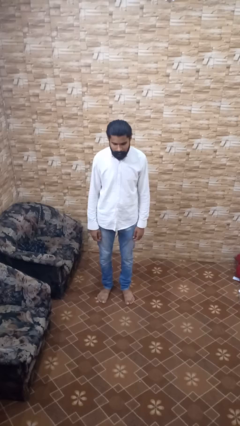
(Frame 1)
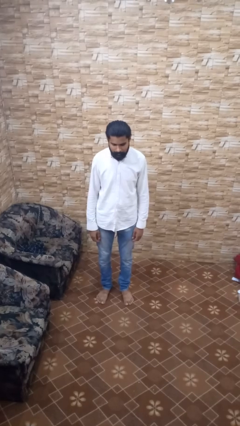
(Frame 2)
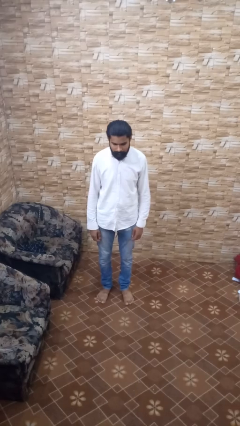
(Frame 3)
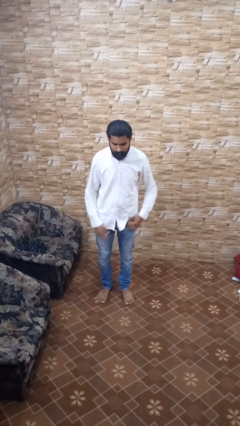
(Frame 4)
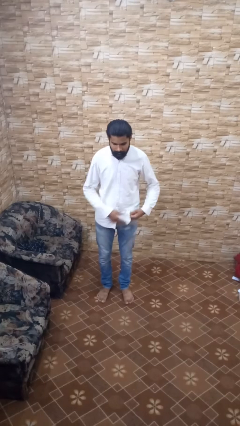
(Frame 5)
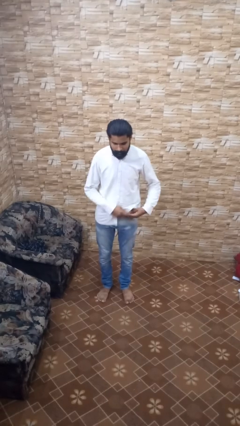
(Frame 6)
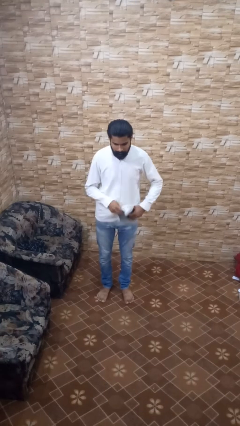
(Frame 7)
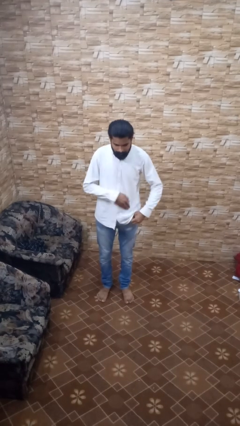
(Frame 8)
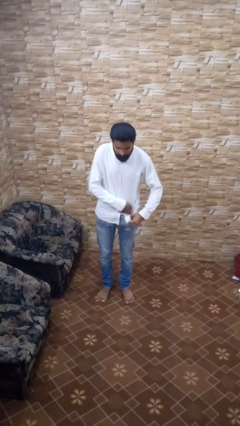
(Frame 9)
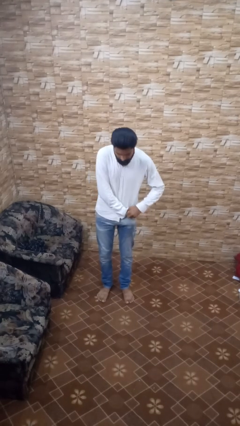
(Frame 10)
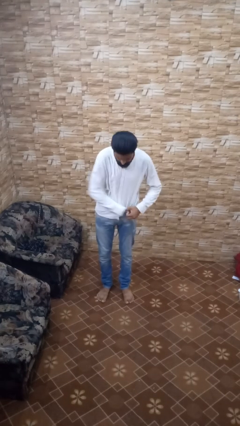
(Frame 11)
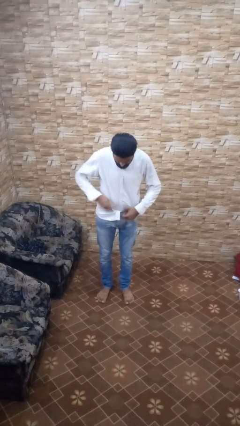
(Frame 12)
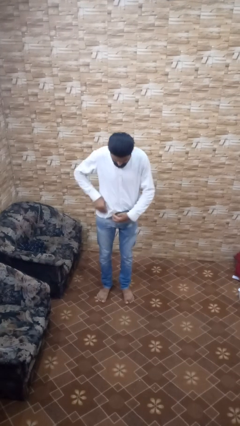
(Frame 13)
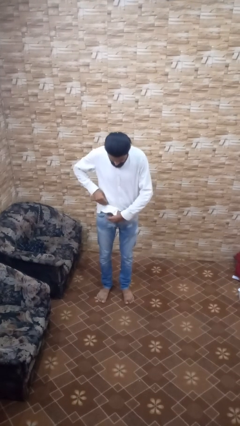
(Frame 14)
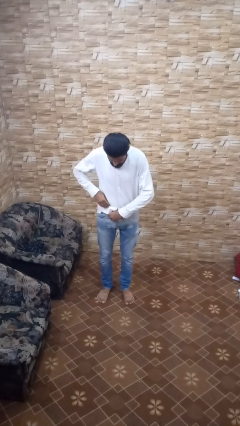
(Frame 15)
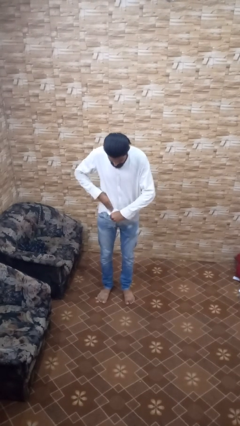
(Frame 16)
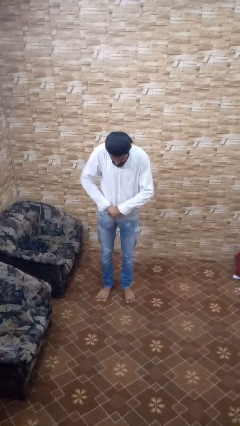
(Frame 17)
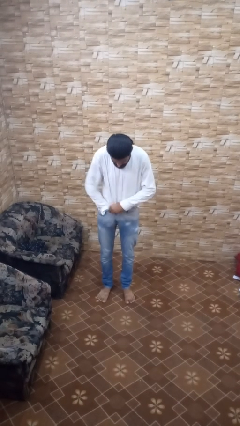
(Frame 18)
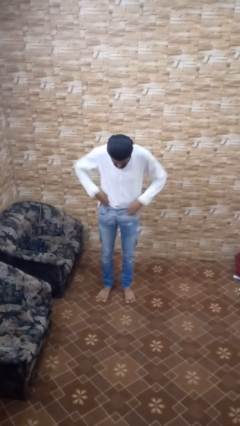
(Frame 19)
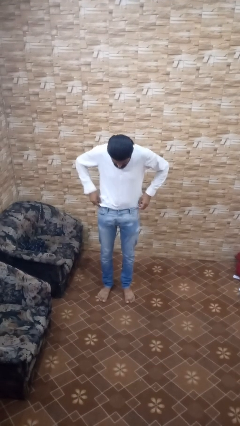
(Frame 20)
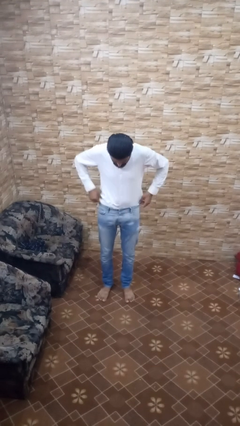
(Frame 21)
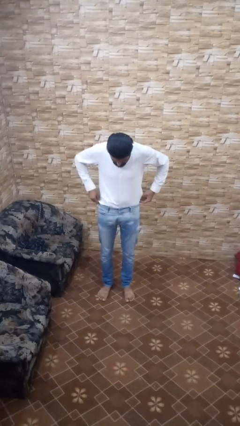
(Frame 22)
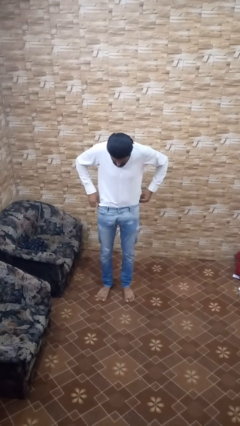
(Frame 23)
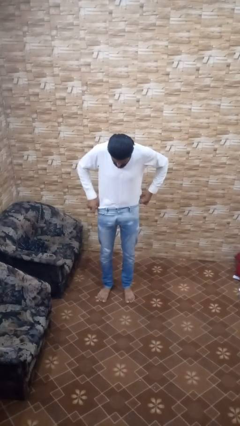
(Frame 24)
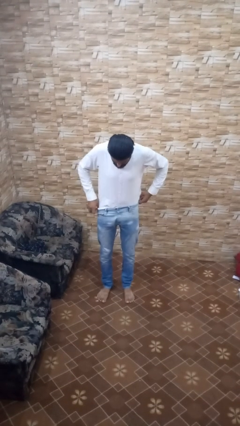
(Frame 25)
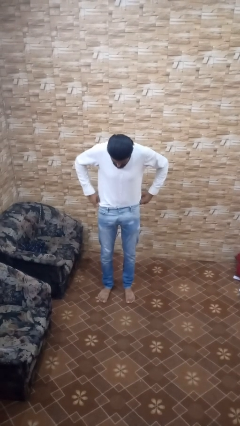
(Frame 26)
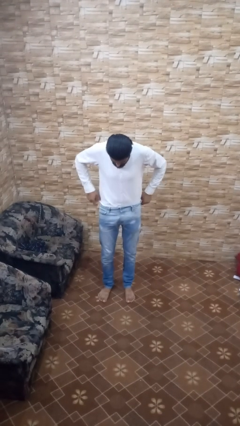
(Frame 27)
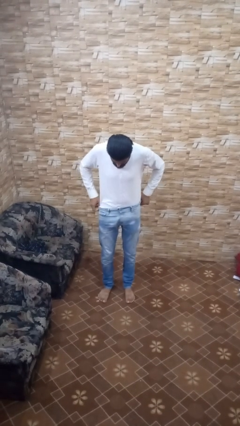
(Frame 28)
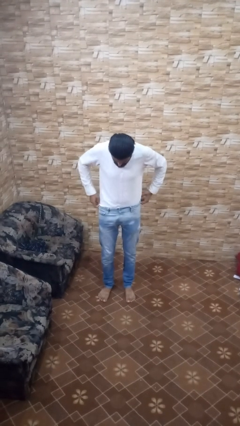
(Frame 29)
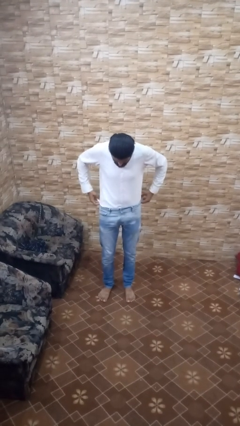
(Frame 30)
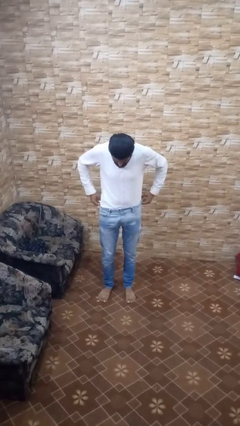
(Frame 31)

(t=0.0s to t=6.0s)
person tucks in shirt

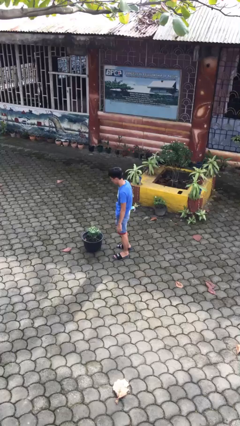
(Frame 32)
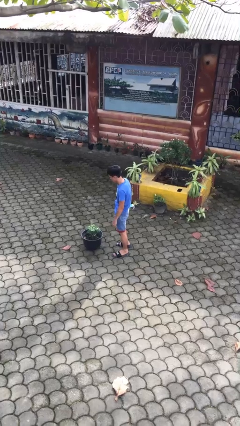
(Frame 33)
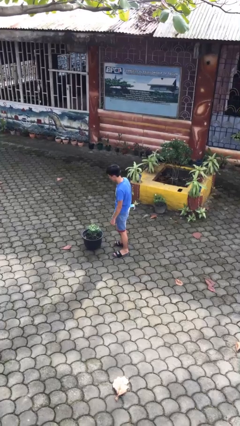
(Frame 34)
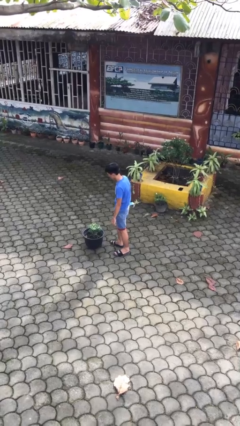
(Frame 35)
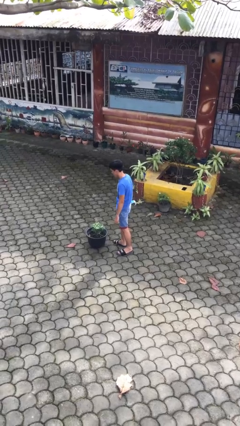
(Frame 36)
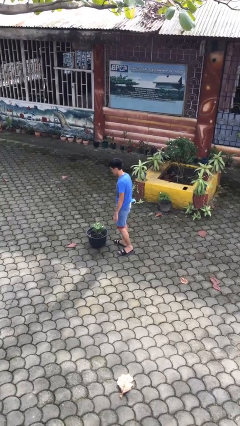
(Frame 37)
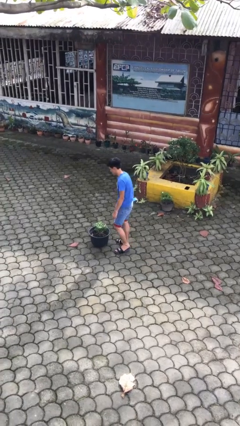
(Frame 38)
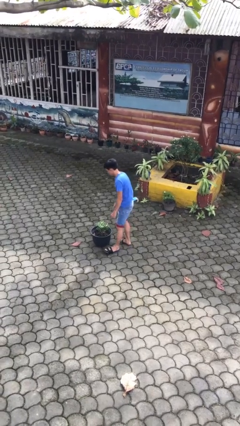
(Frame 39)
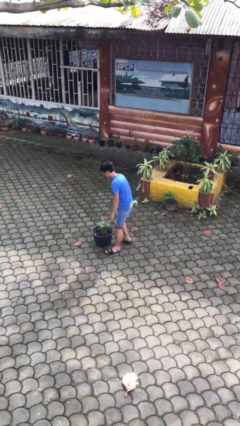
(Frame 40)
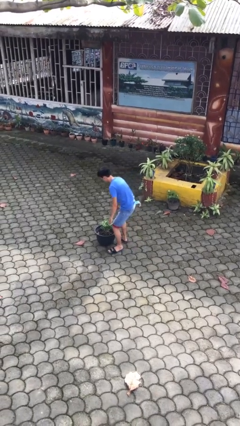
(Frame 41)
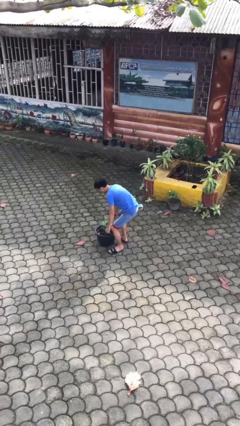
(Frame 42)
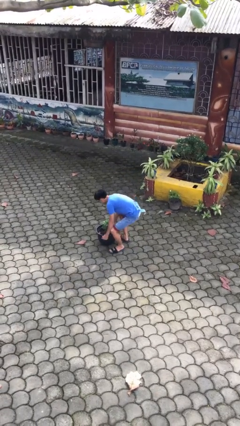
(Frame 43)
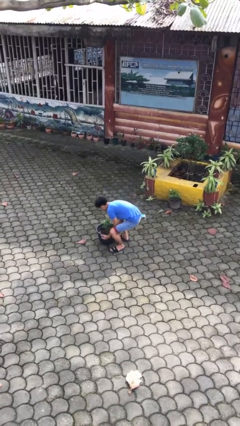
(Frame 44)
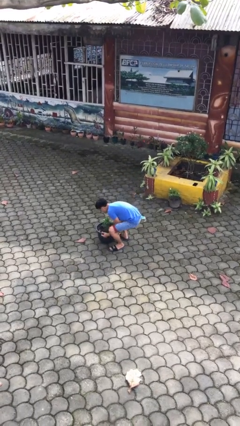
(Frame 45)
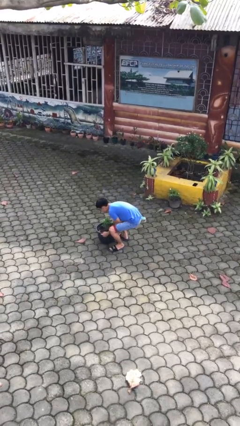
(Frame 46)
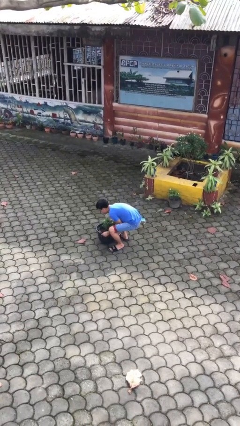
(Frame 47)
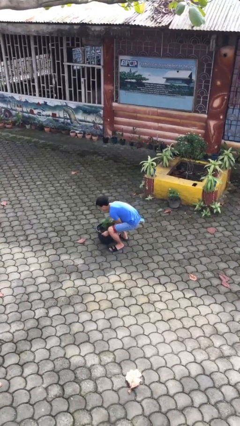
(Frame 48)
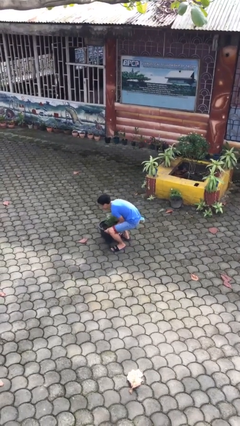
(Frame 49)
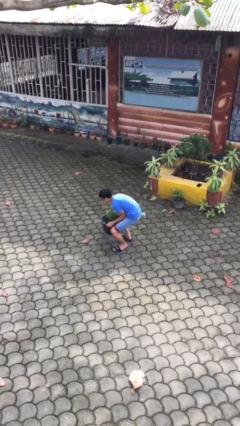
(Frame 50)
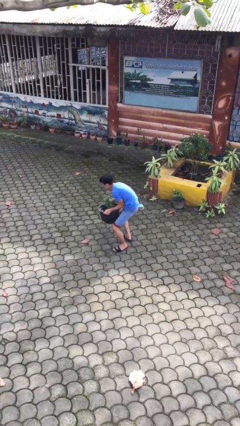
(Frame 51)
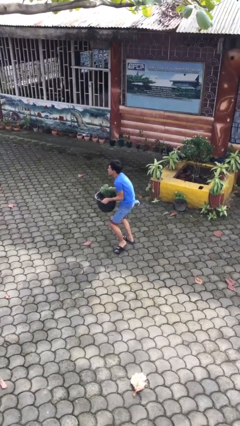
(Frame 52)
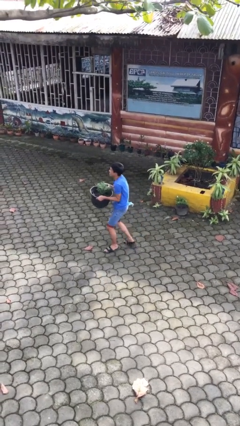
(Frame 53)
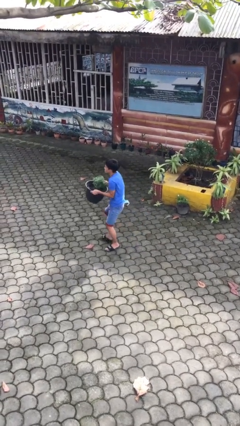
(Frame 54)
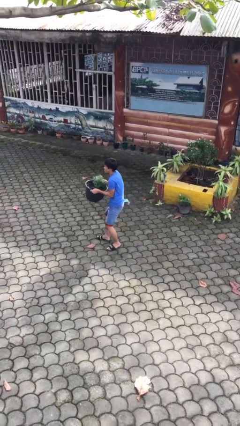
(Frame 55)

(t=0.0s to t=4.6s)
person picks up object from floor

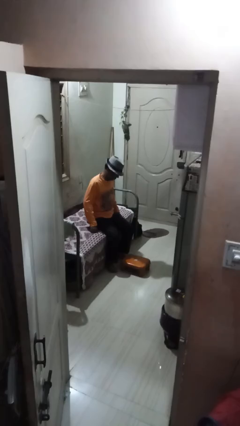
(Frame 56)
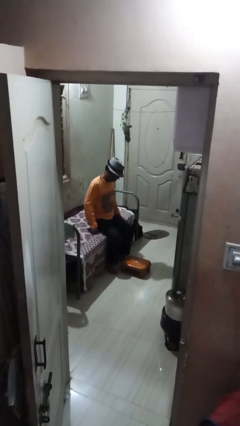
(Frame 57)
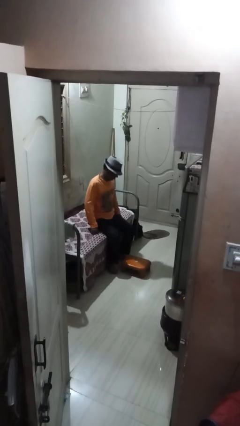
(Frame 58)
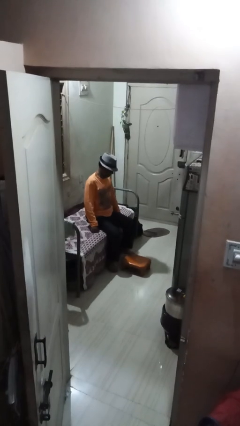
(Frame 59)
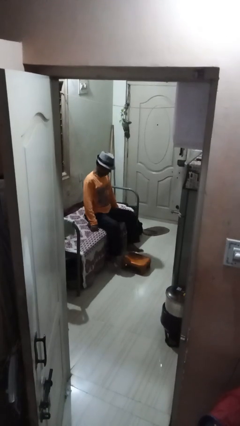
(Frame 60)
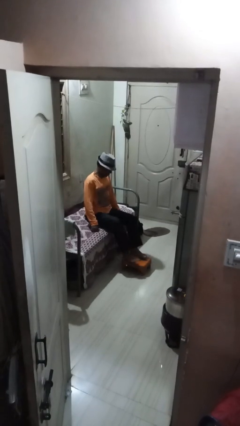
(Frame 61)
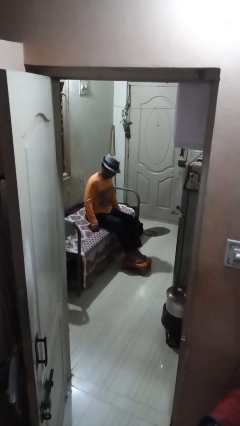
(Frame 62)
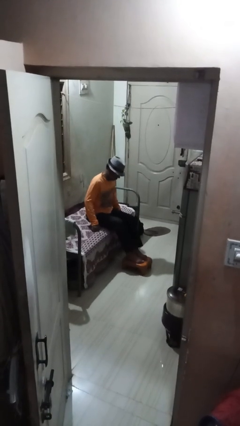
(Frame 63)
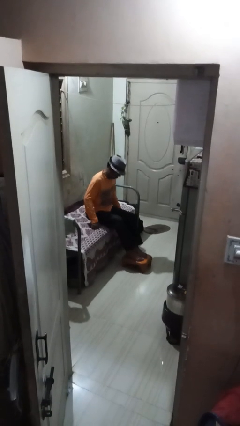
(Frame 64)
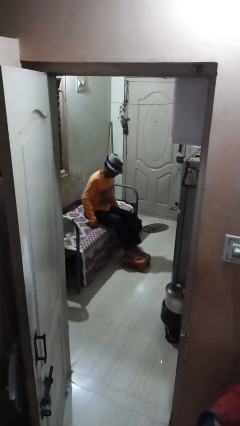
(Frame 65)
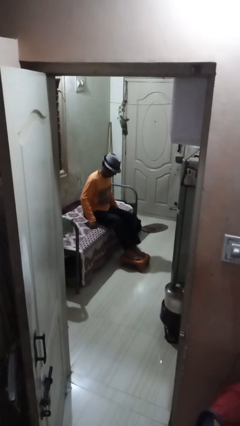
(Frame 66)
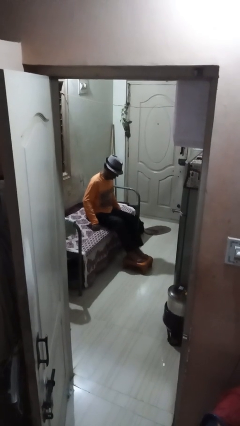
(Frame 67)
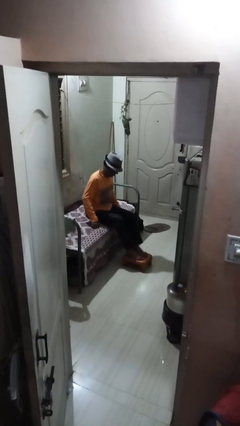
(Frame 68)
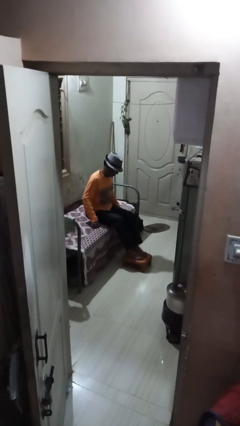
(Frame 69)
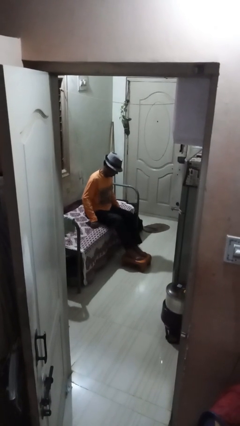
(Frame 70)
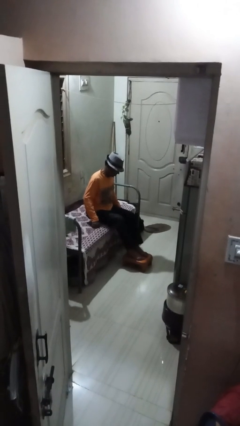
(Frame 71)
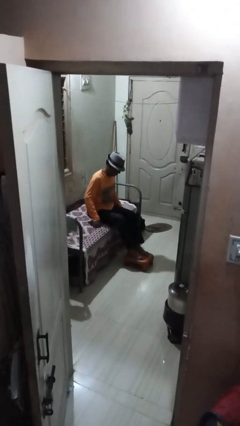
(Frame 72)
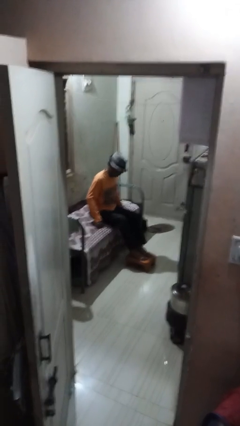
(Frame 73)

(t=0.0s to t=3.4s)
person puts feet up

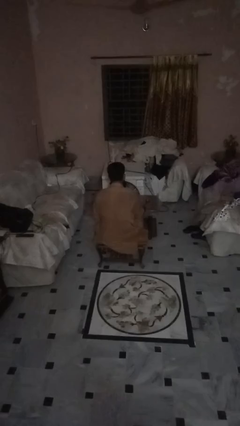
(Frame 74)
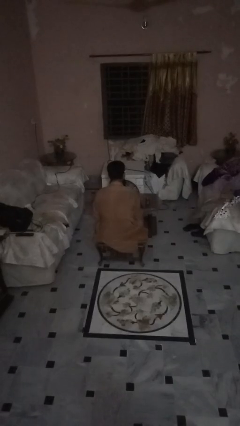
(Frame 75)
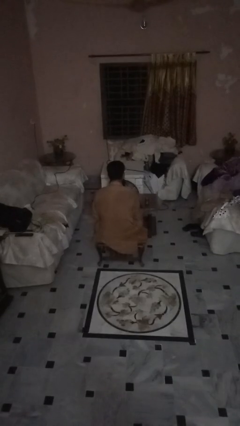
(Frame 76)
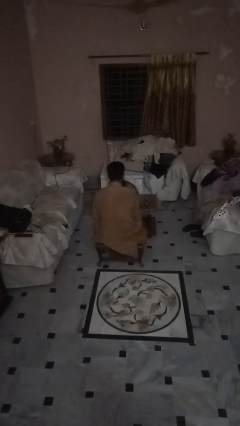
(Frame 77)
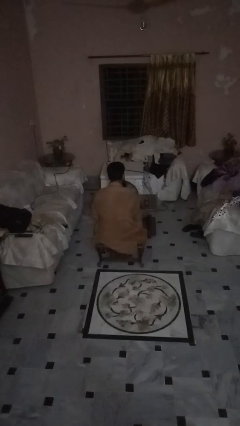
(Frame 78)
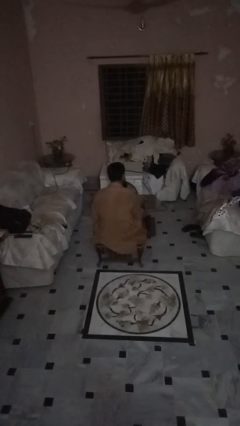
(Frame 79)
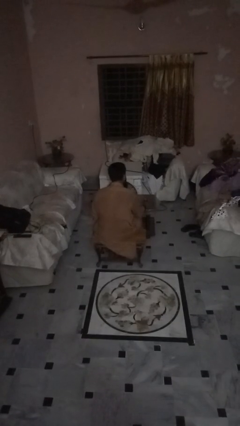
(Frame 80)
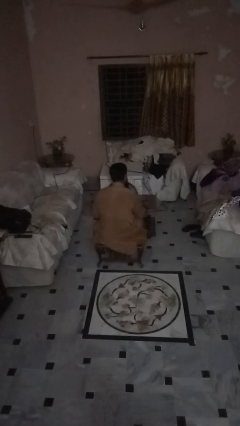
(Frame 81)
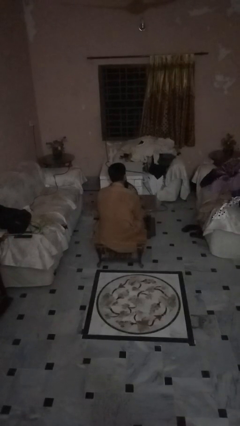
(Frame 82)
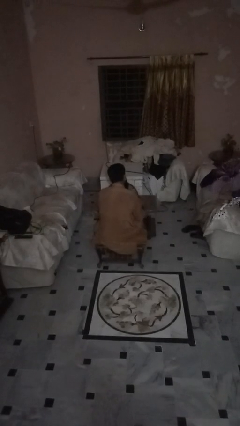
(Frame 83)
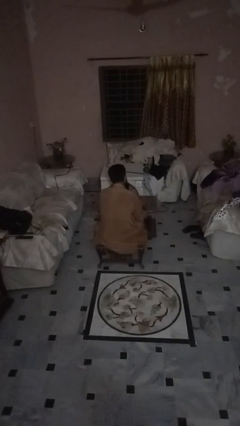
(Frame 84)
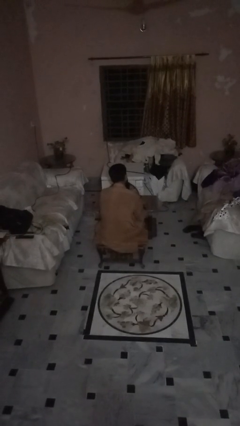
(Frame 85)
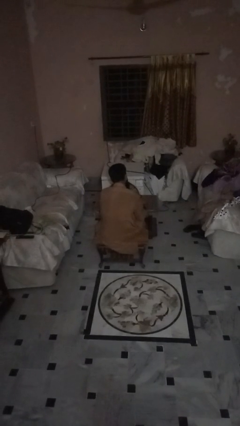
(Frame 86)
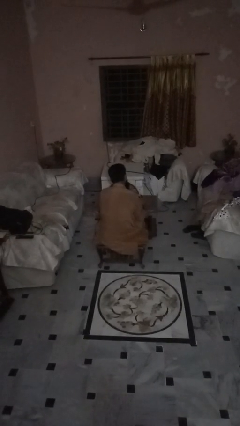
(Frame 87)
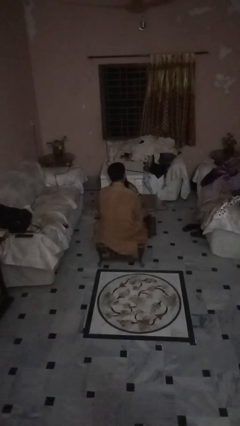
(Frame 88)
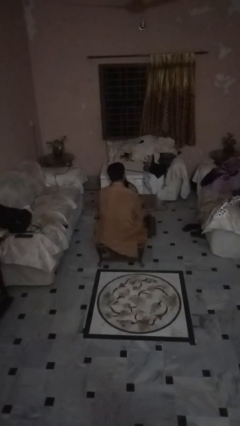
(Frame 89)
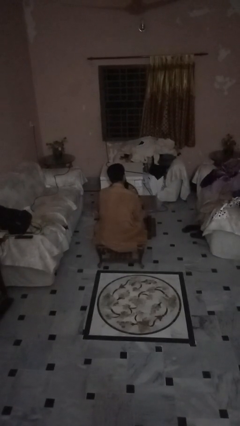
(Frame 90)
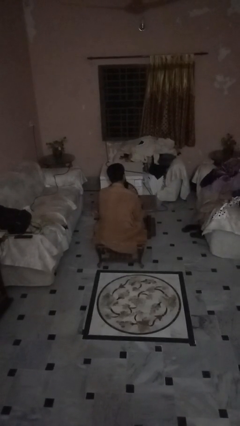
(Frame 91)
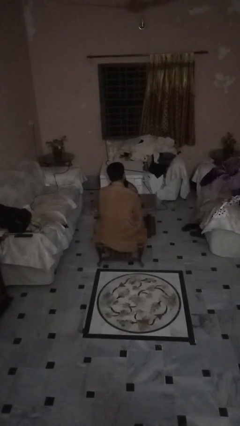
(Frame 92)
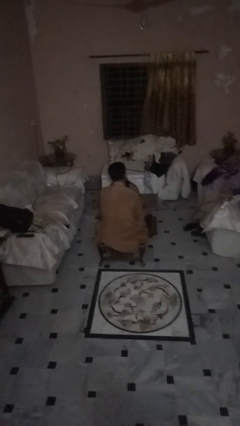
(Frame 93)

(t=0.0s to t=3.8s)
person opens beverage can
